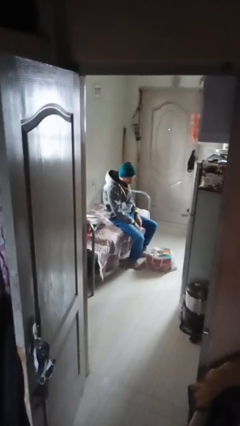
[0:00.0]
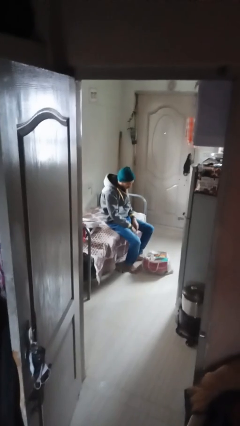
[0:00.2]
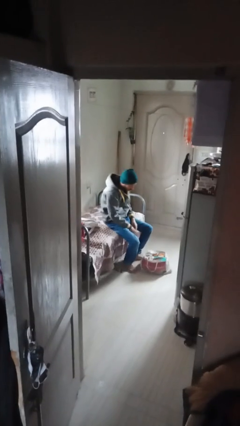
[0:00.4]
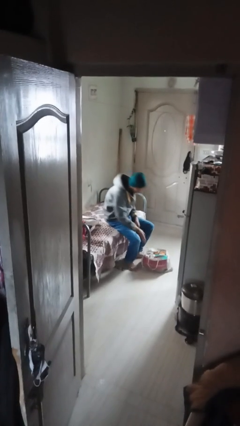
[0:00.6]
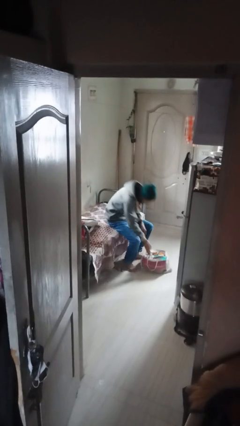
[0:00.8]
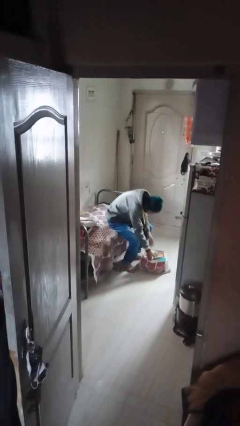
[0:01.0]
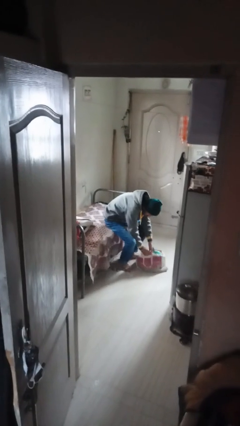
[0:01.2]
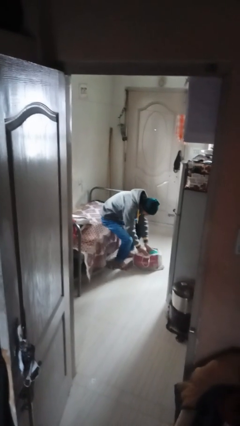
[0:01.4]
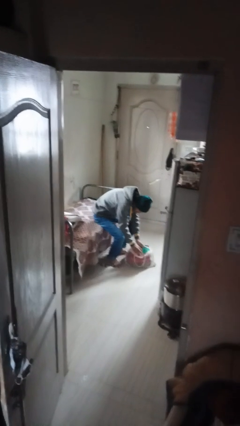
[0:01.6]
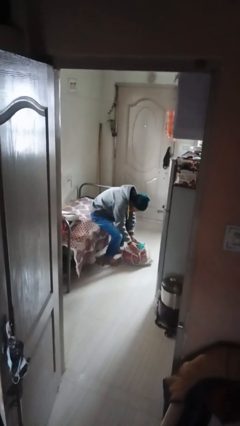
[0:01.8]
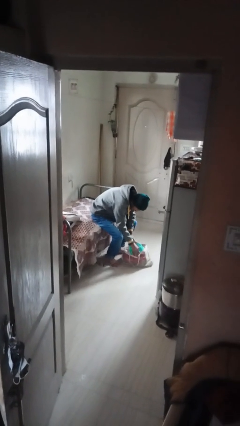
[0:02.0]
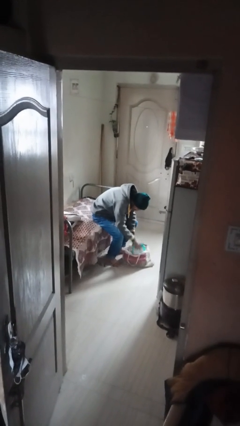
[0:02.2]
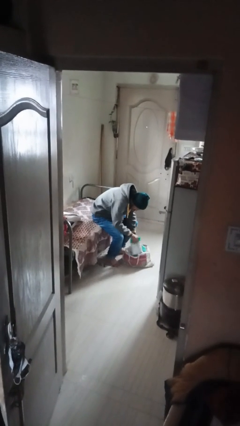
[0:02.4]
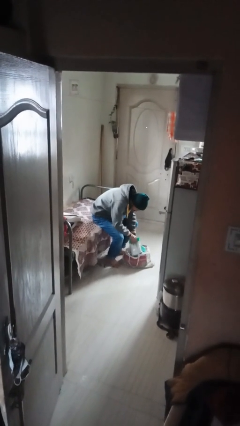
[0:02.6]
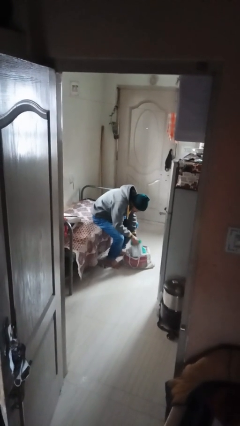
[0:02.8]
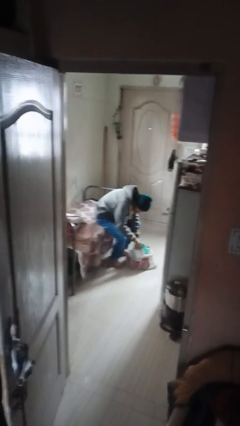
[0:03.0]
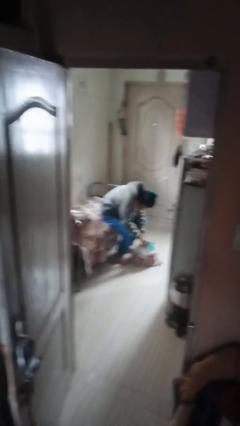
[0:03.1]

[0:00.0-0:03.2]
person searches in bag

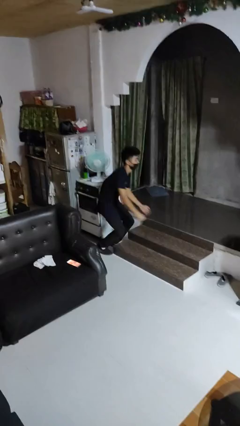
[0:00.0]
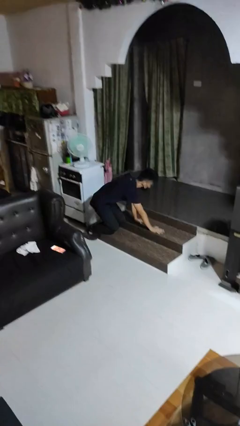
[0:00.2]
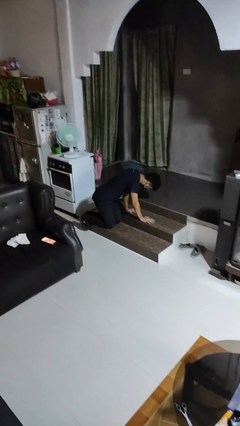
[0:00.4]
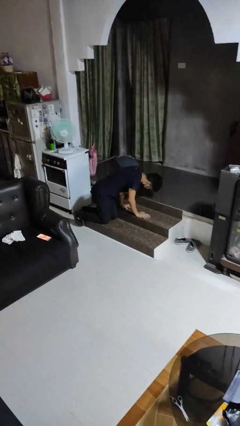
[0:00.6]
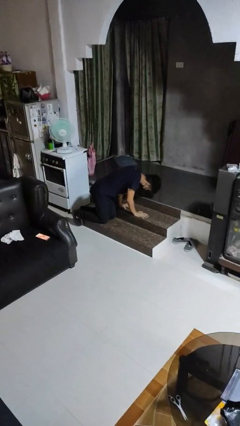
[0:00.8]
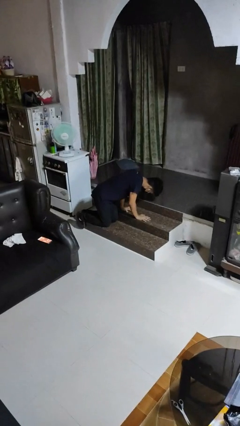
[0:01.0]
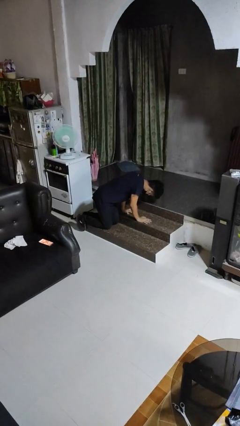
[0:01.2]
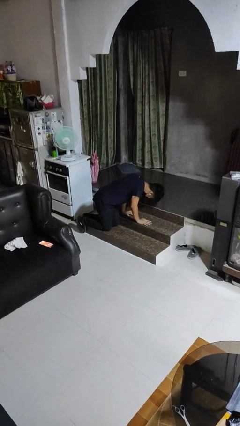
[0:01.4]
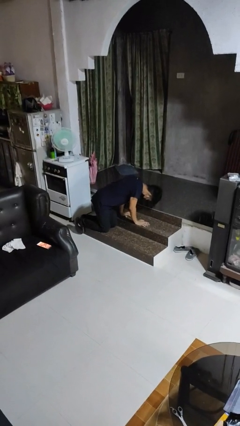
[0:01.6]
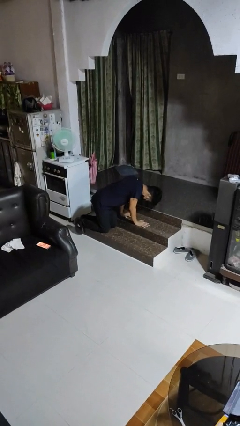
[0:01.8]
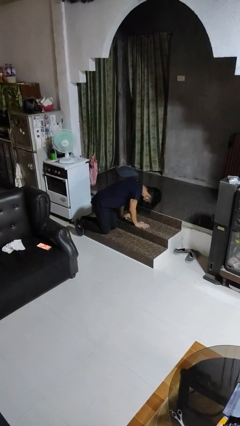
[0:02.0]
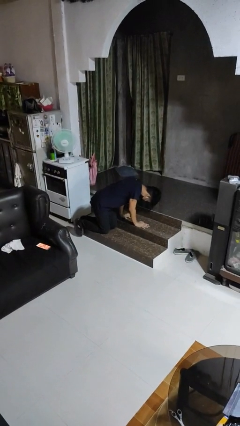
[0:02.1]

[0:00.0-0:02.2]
person trips on object on floor

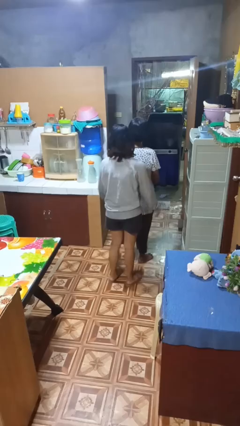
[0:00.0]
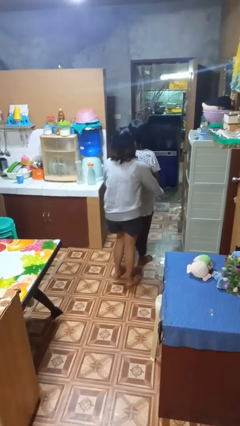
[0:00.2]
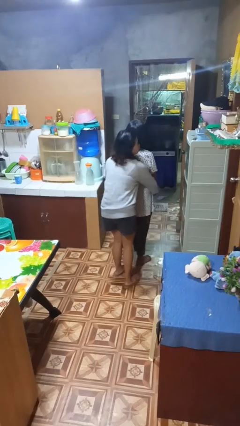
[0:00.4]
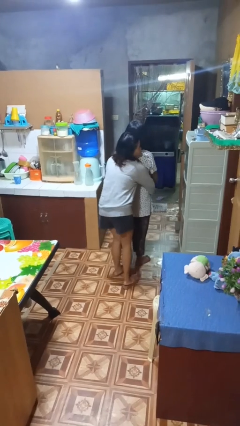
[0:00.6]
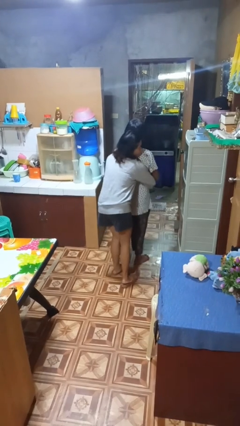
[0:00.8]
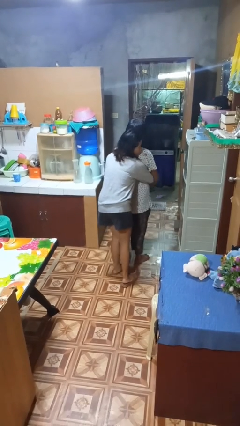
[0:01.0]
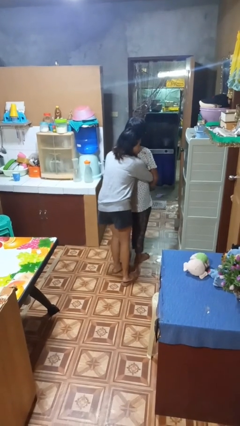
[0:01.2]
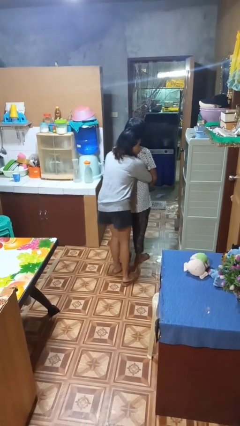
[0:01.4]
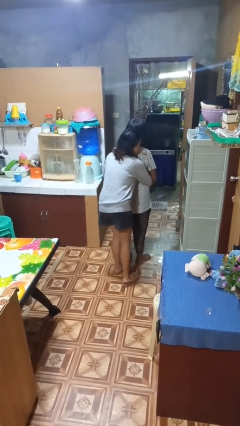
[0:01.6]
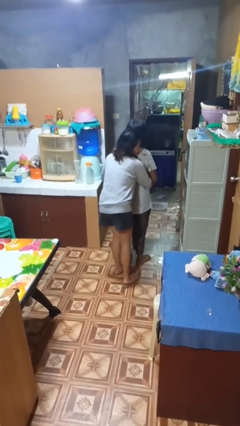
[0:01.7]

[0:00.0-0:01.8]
person hugs person from behind

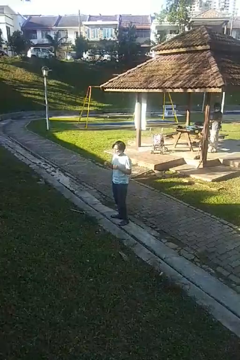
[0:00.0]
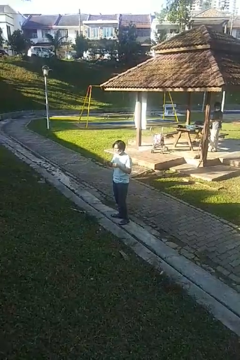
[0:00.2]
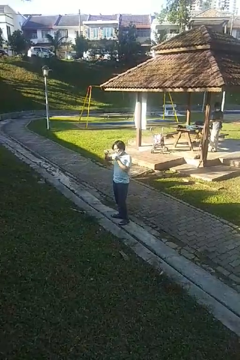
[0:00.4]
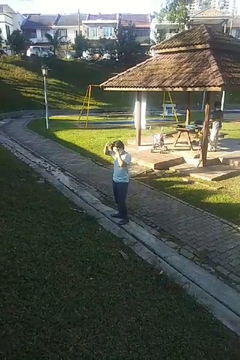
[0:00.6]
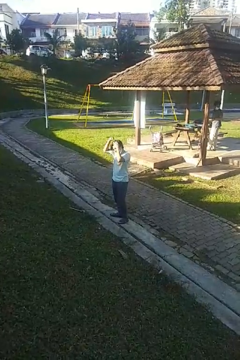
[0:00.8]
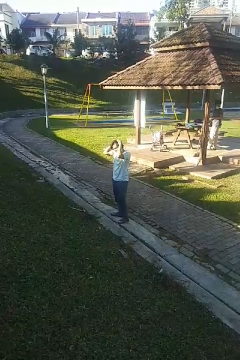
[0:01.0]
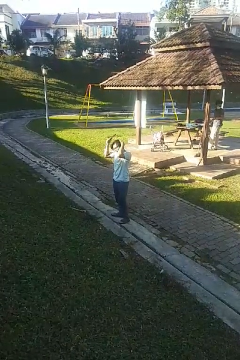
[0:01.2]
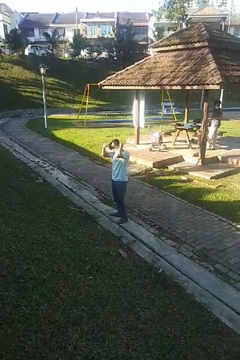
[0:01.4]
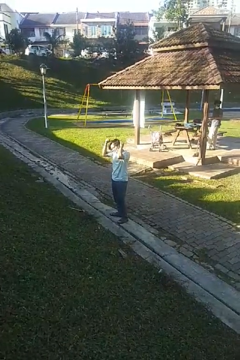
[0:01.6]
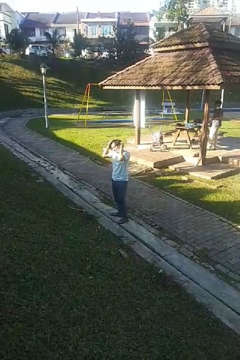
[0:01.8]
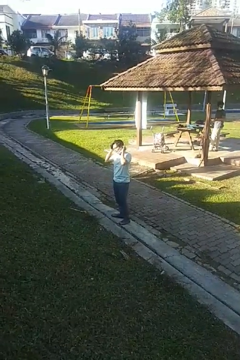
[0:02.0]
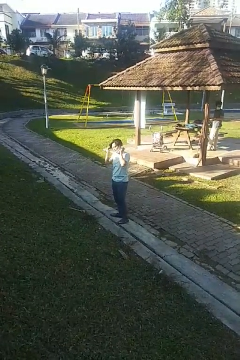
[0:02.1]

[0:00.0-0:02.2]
person brushes hair

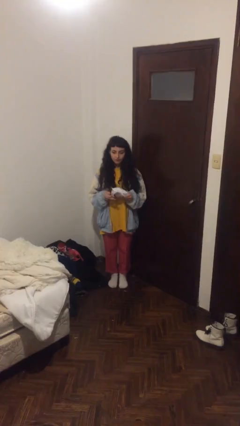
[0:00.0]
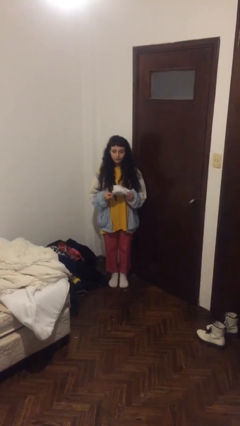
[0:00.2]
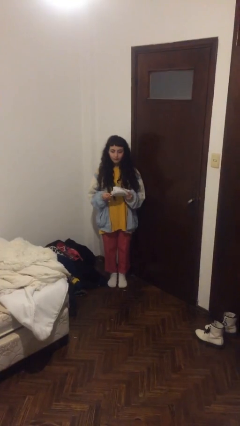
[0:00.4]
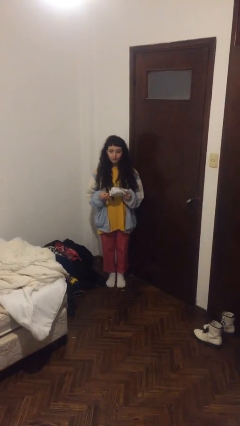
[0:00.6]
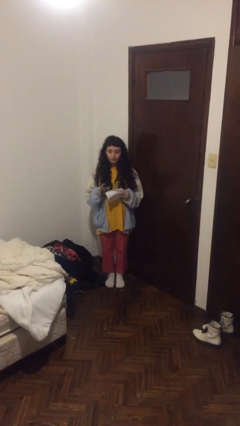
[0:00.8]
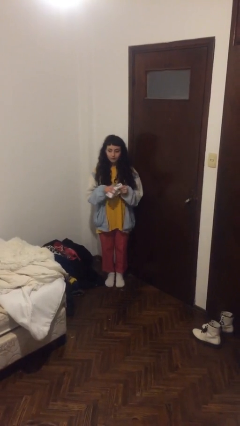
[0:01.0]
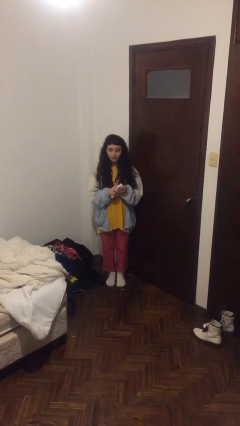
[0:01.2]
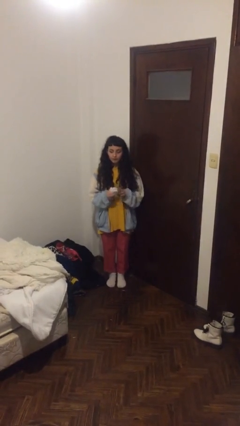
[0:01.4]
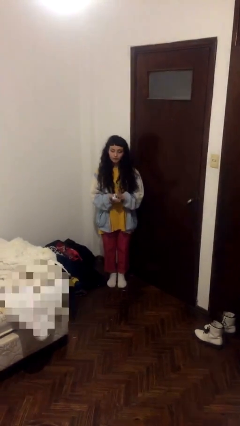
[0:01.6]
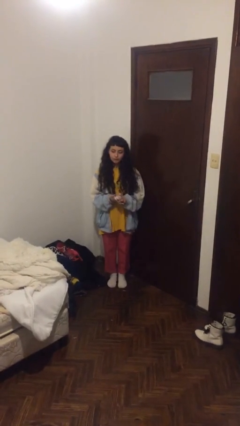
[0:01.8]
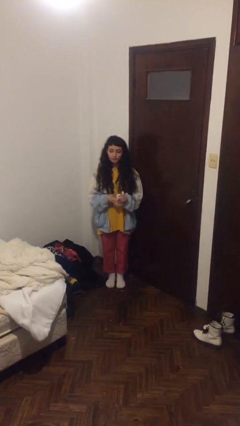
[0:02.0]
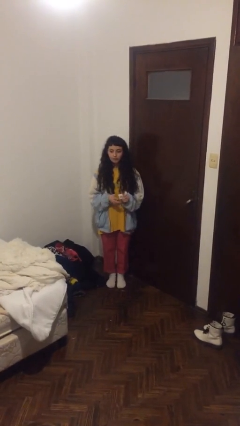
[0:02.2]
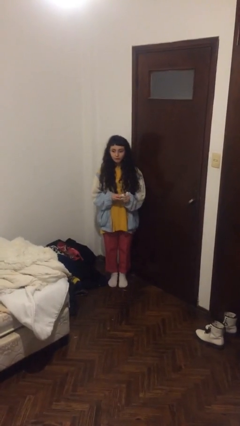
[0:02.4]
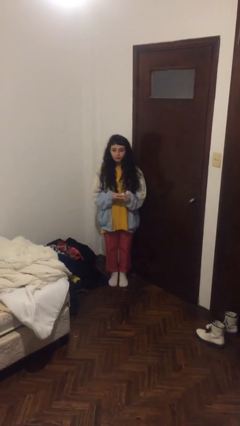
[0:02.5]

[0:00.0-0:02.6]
person crumples paper

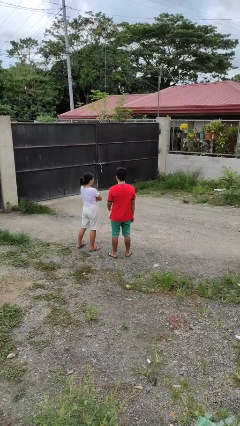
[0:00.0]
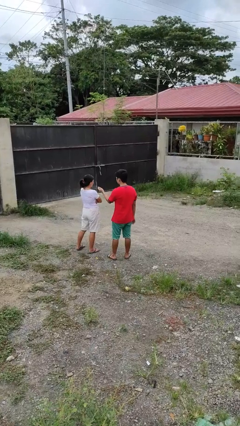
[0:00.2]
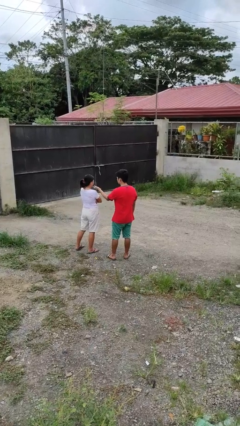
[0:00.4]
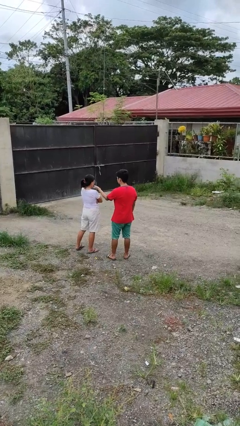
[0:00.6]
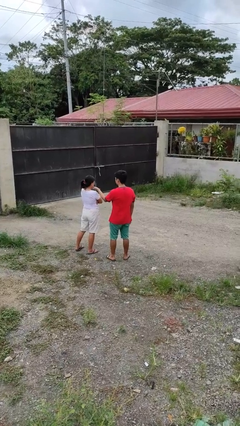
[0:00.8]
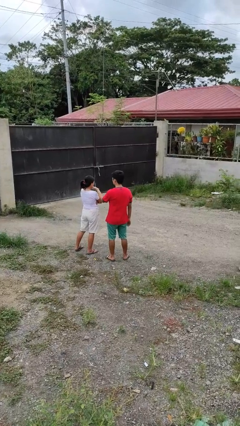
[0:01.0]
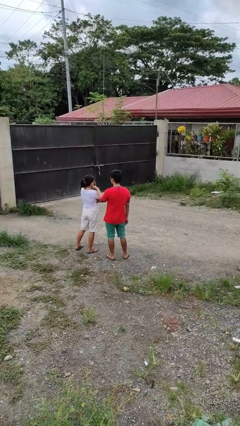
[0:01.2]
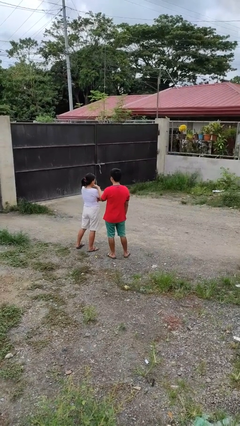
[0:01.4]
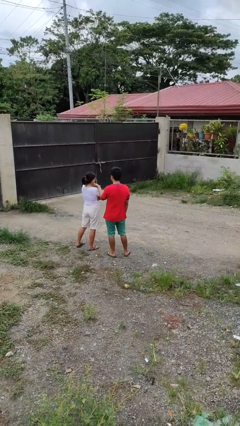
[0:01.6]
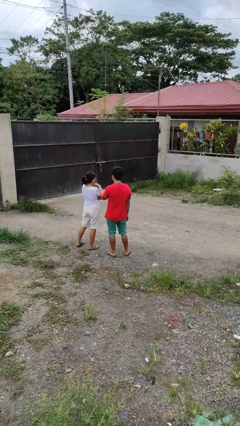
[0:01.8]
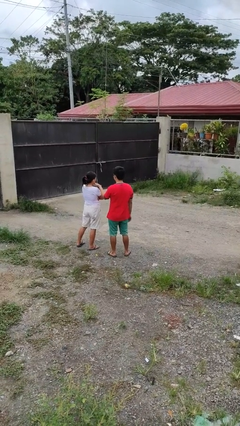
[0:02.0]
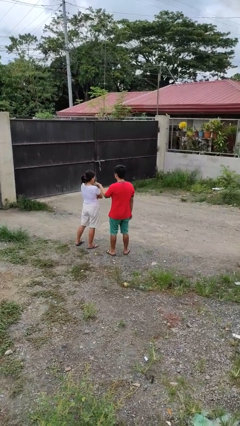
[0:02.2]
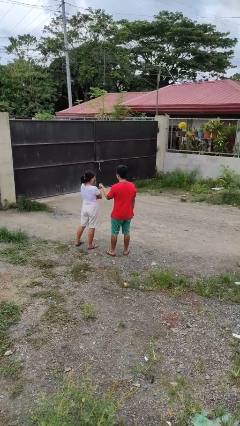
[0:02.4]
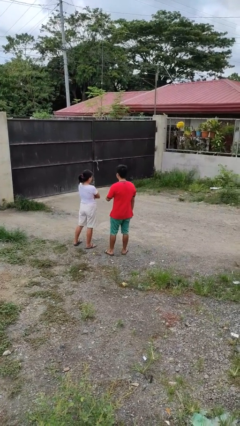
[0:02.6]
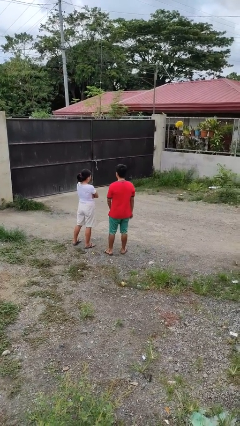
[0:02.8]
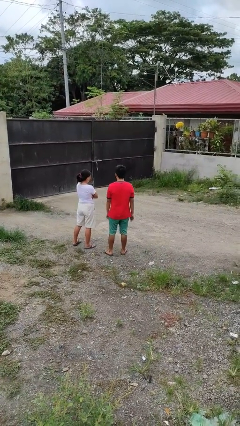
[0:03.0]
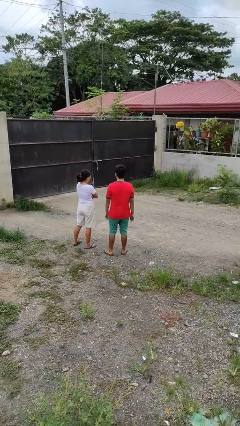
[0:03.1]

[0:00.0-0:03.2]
person touches face of person

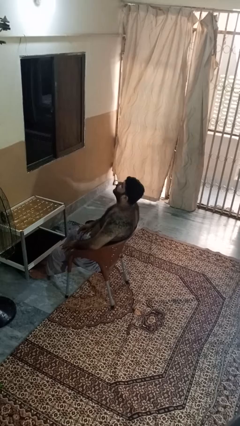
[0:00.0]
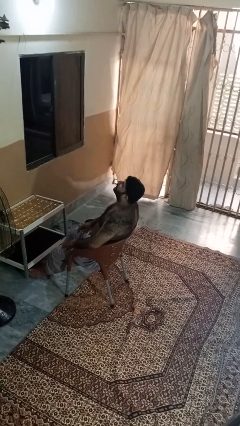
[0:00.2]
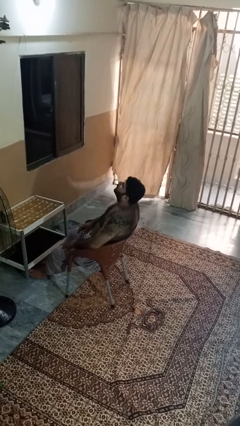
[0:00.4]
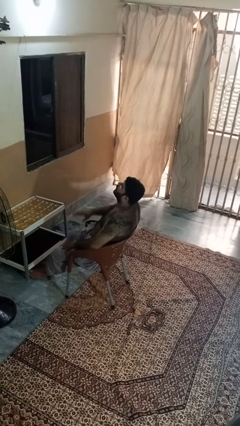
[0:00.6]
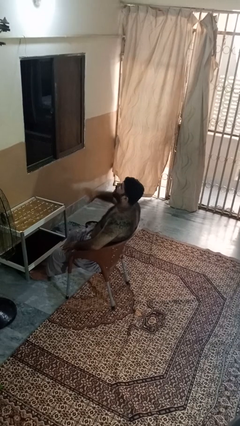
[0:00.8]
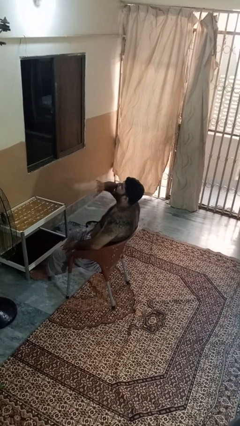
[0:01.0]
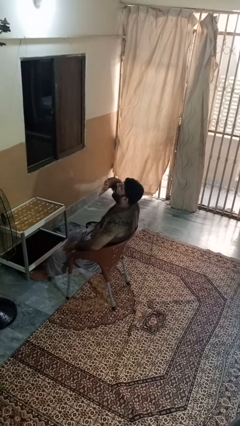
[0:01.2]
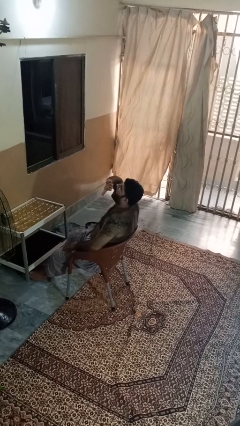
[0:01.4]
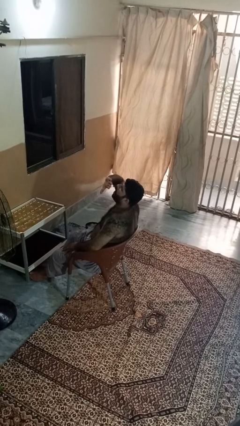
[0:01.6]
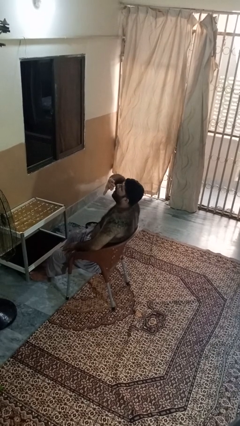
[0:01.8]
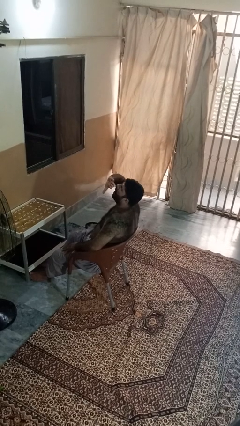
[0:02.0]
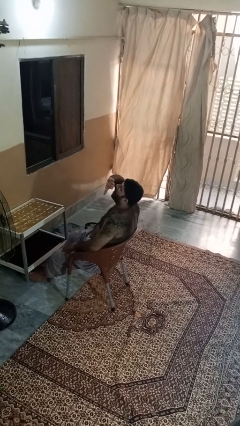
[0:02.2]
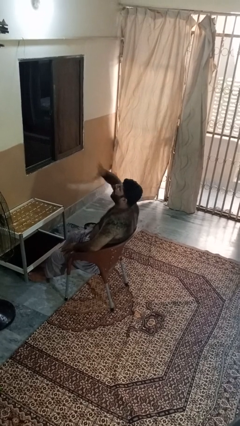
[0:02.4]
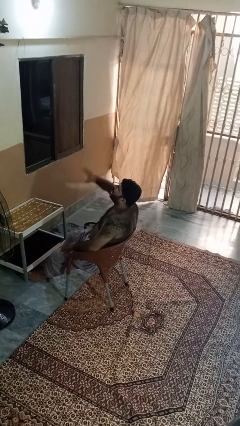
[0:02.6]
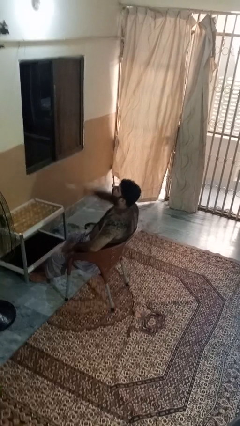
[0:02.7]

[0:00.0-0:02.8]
person yawns
